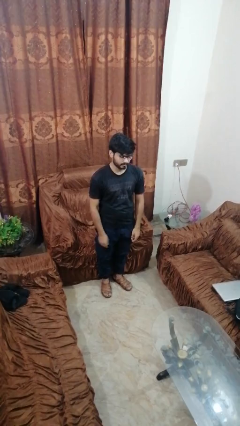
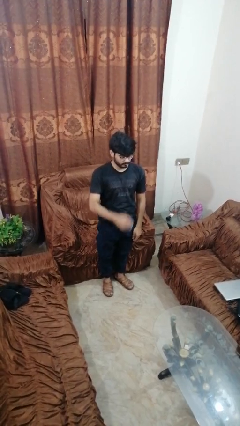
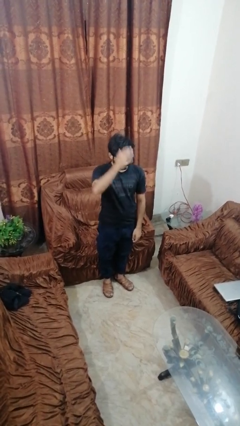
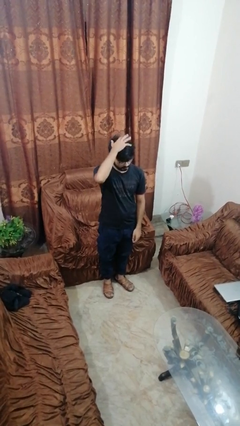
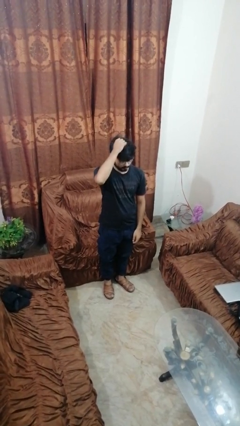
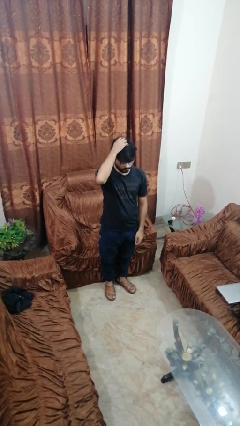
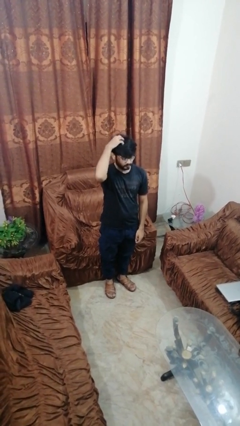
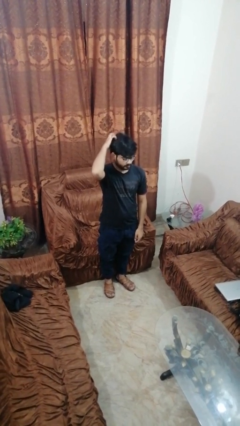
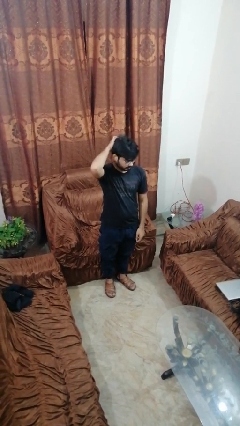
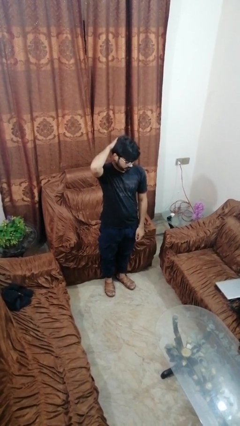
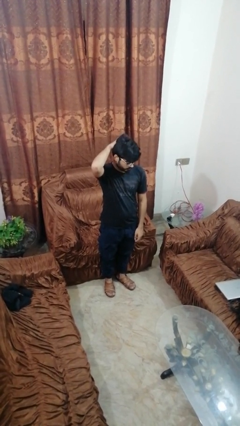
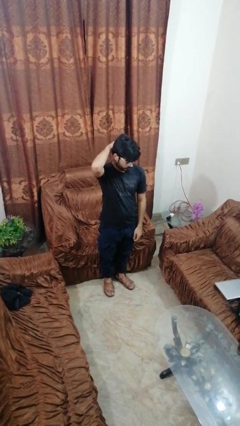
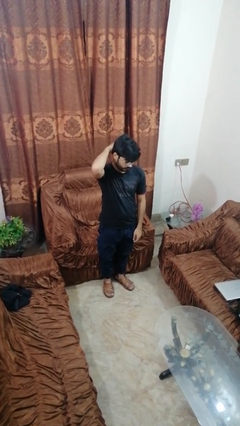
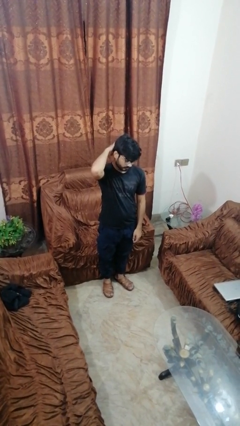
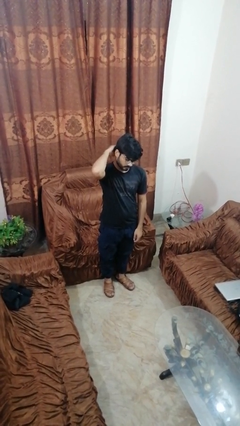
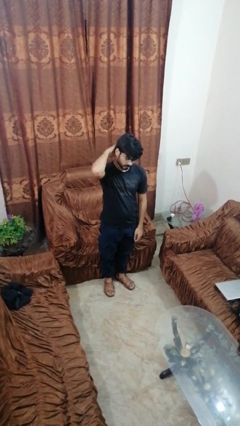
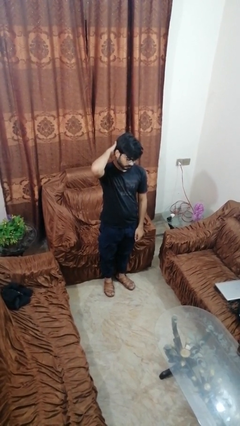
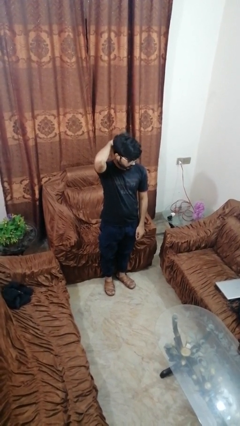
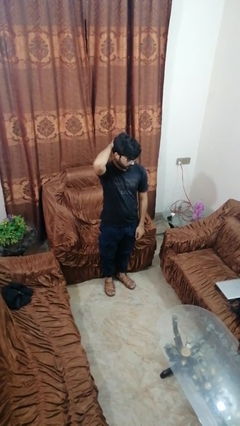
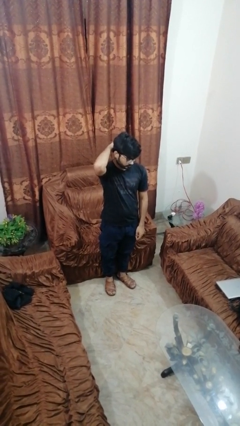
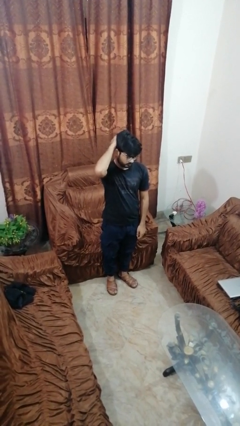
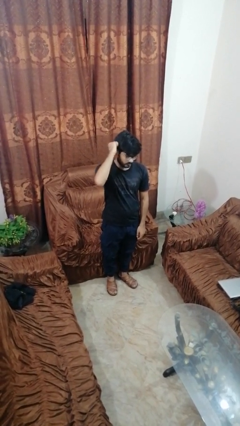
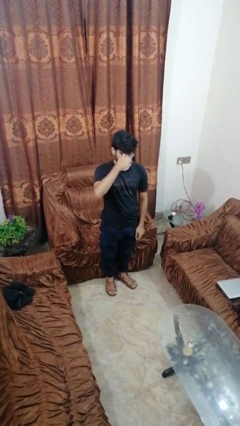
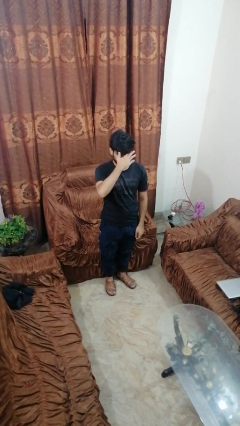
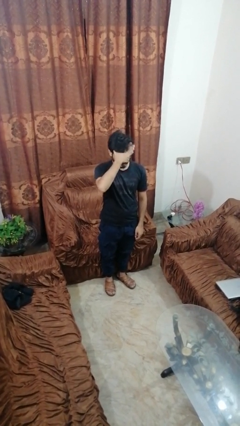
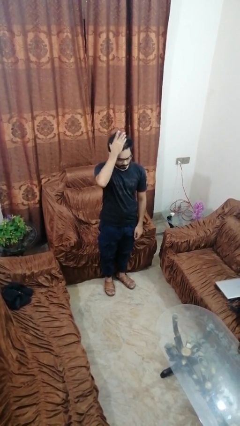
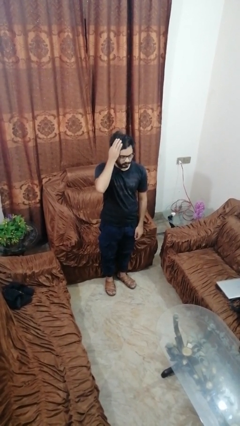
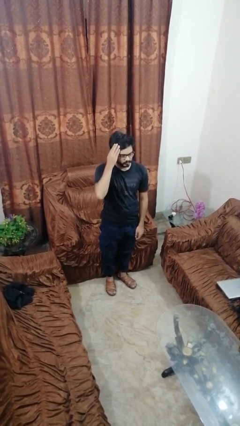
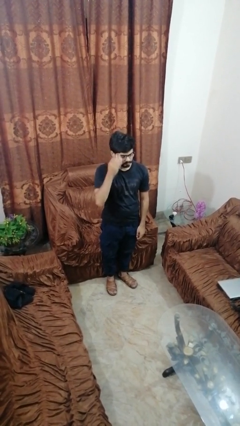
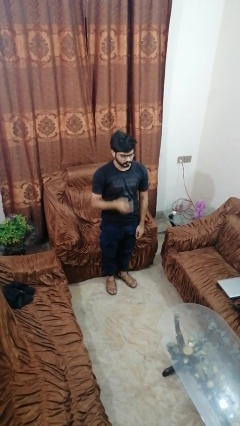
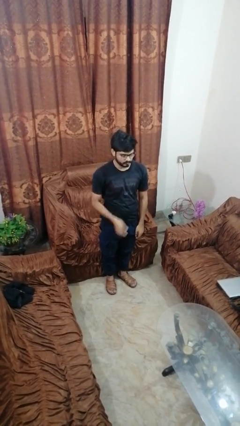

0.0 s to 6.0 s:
person scratches face

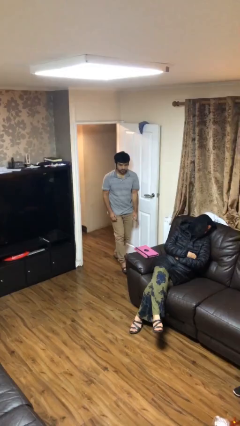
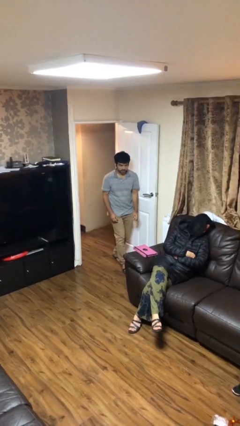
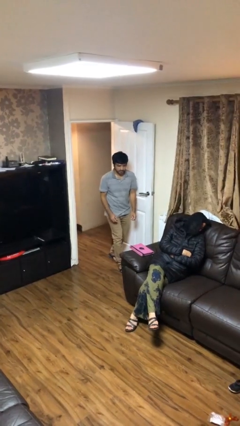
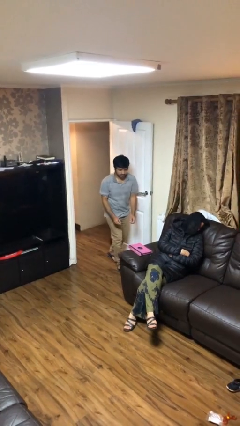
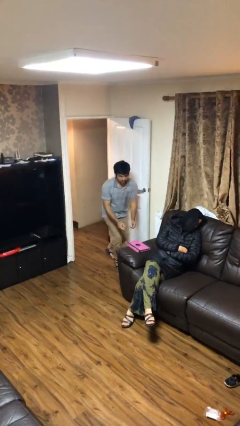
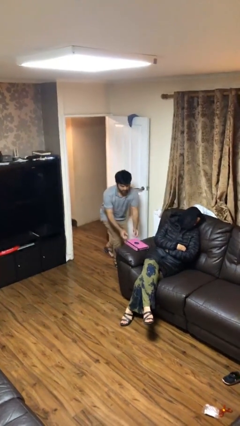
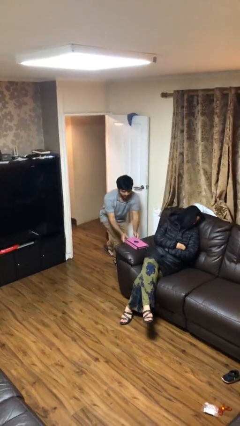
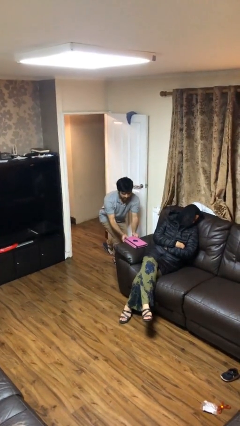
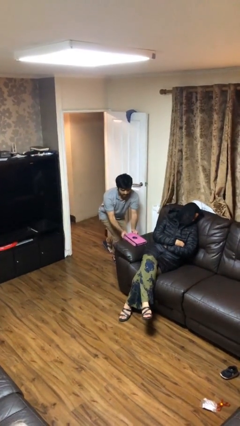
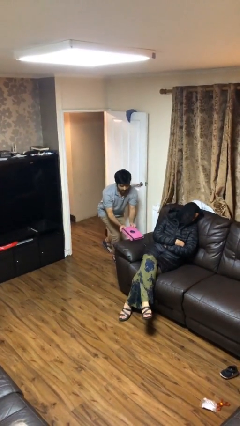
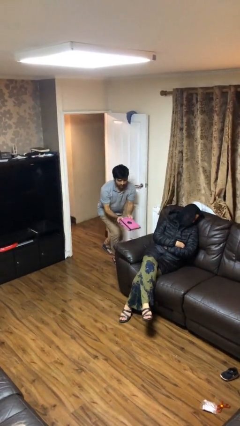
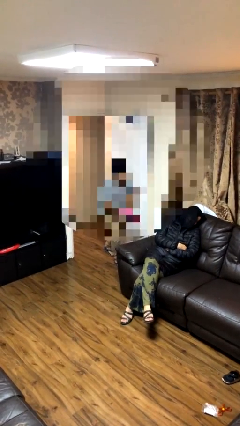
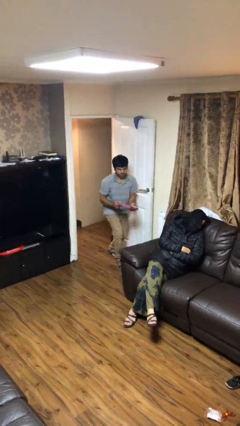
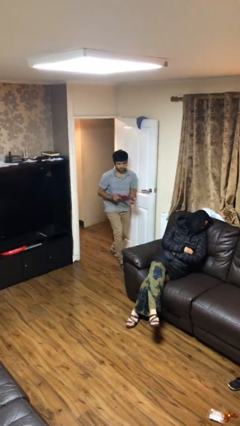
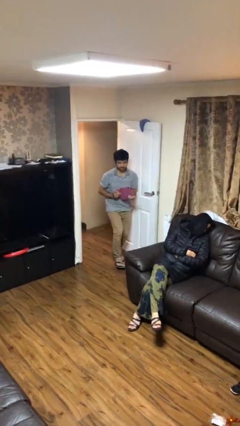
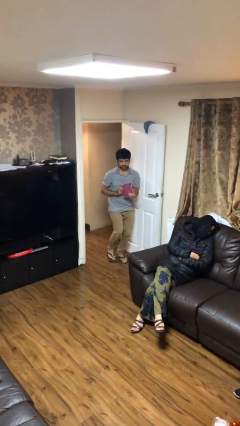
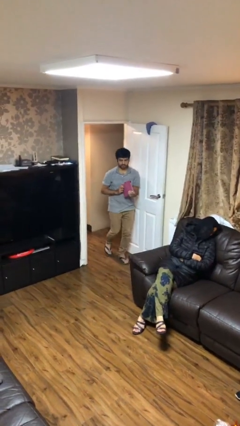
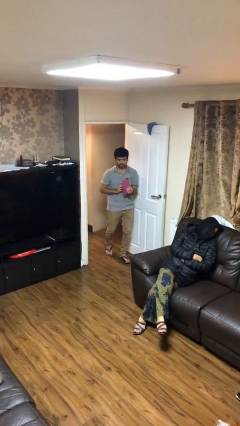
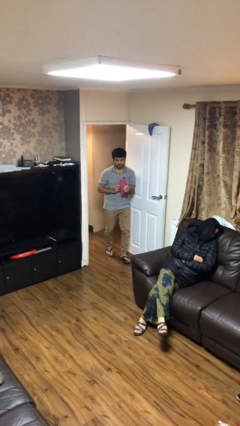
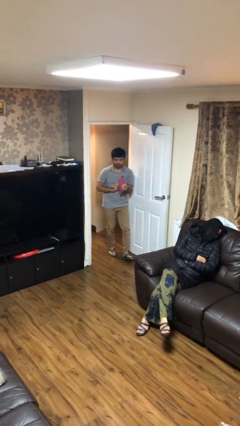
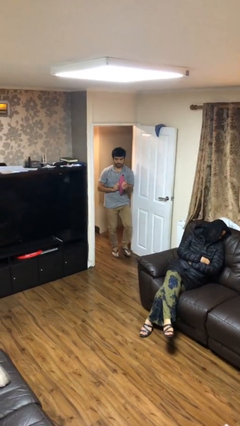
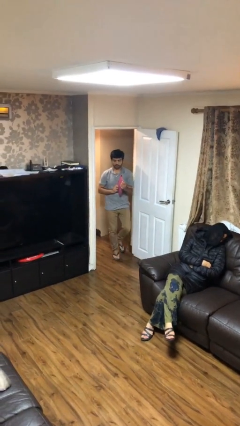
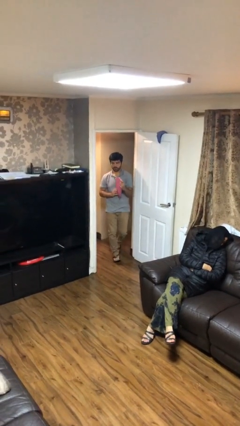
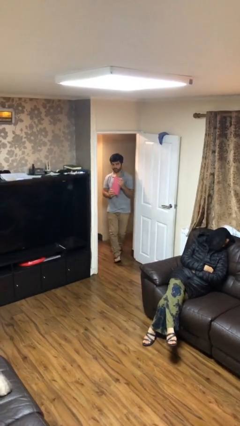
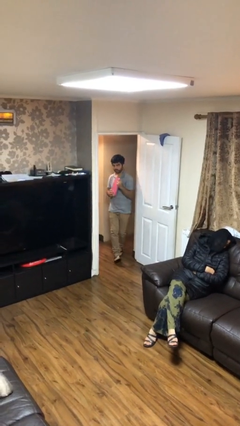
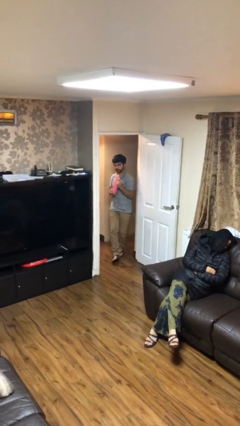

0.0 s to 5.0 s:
person steals object from person

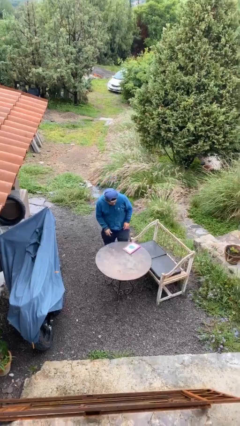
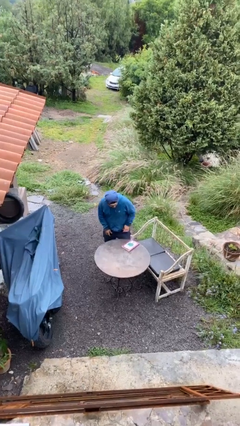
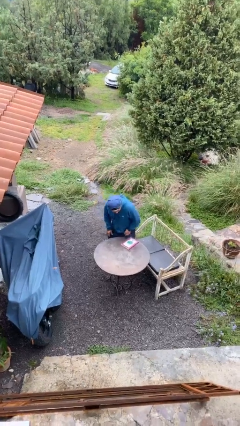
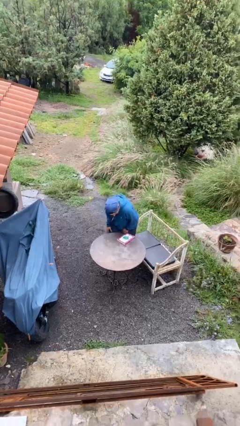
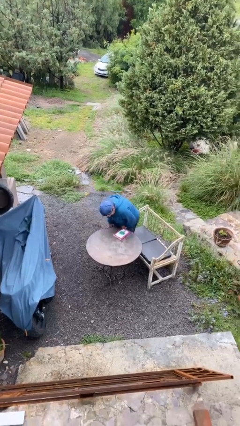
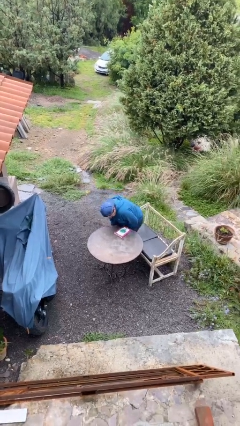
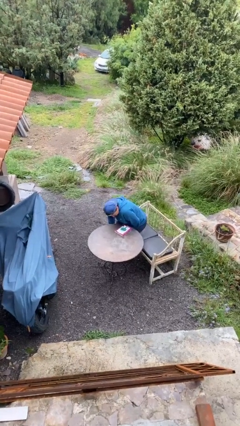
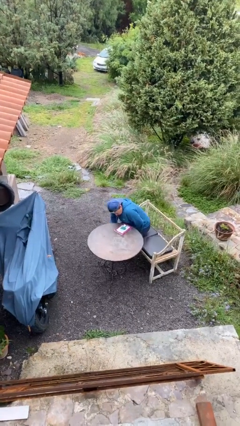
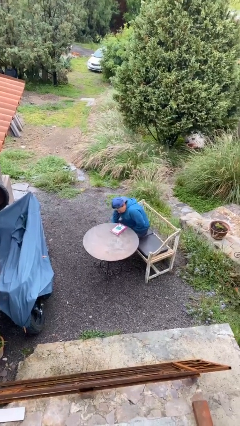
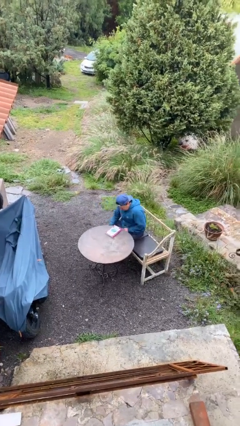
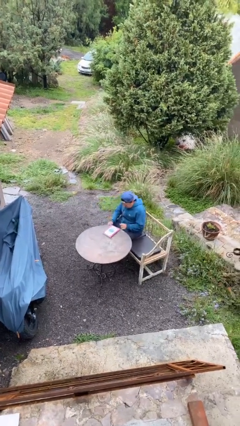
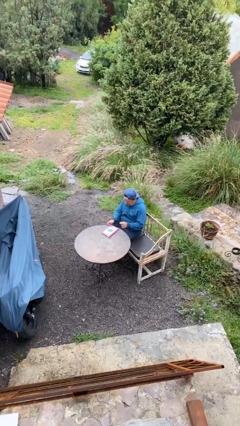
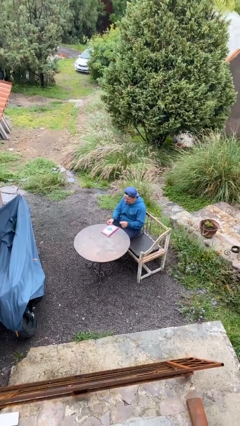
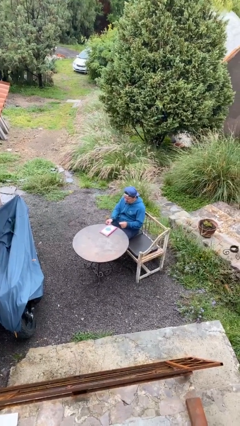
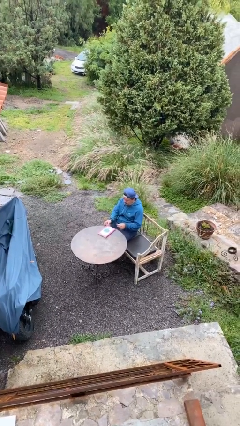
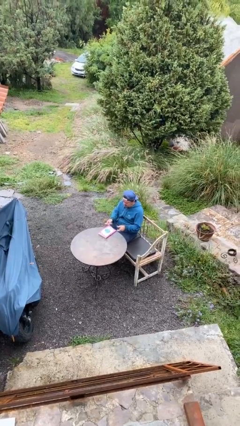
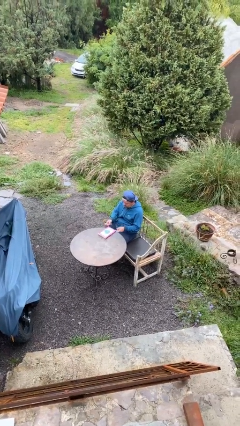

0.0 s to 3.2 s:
person sits down

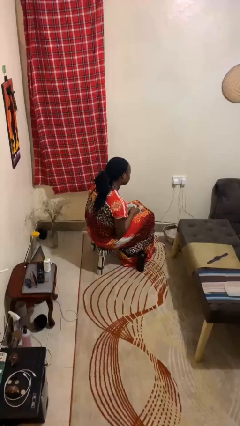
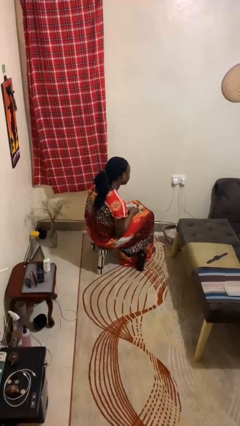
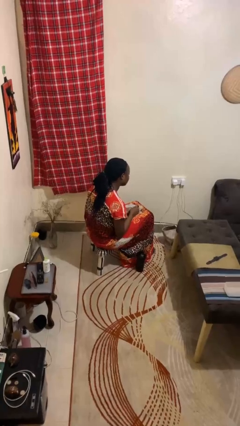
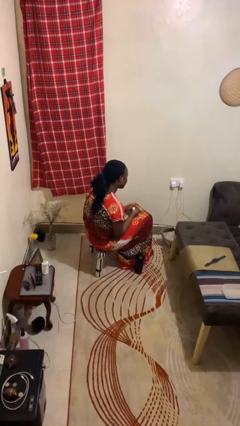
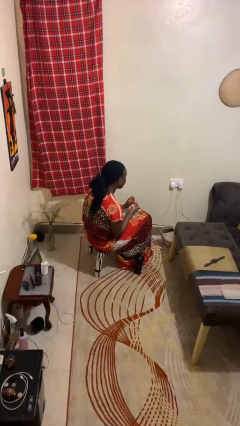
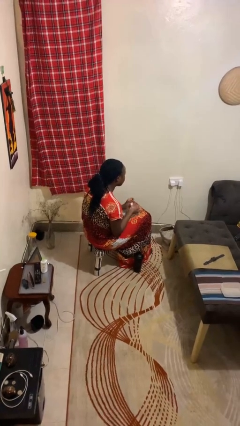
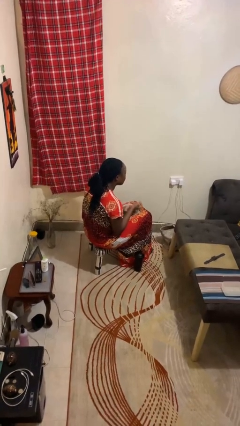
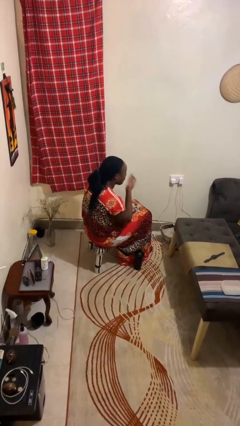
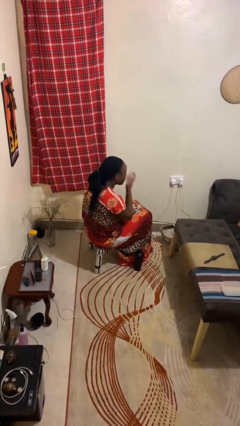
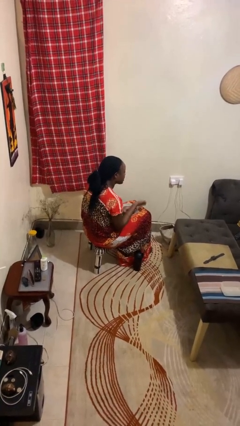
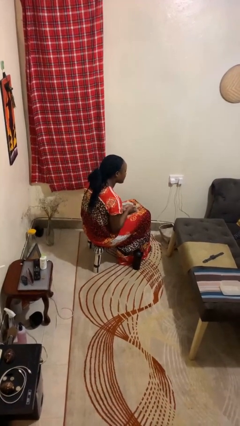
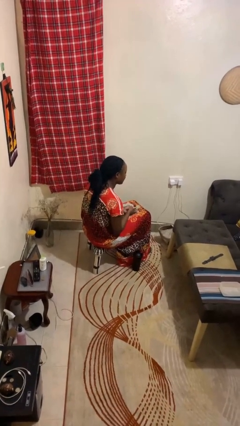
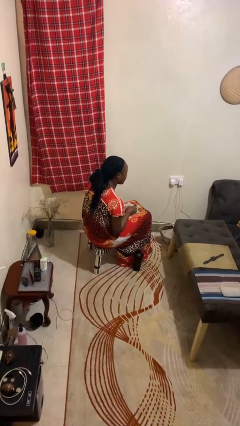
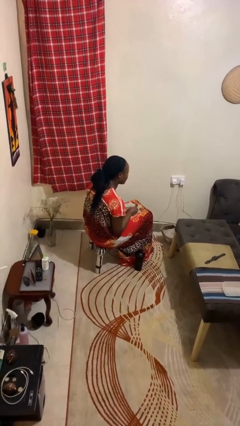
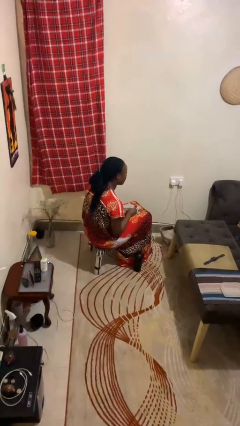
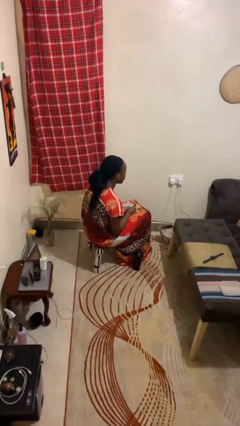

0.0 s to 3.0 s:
person takes medicine pills

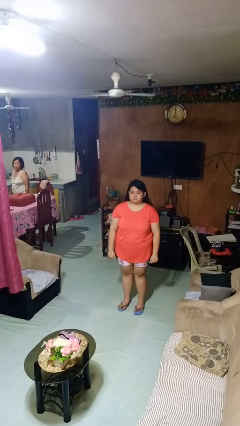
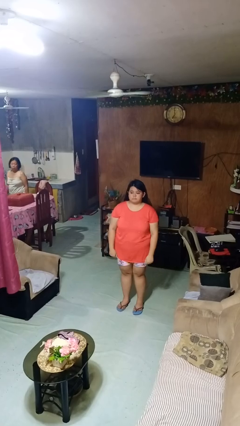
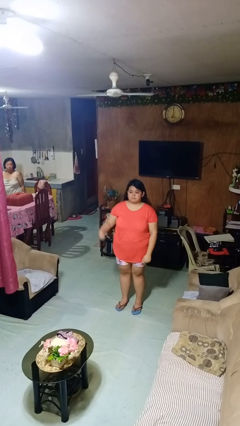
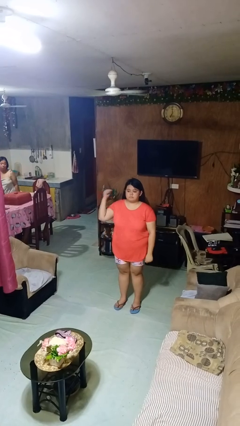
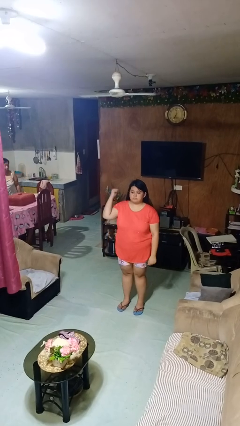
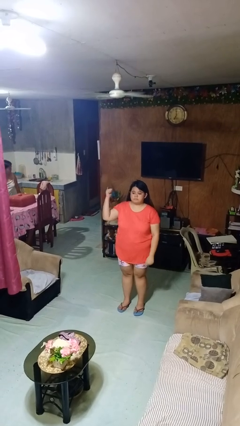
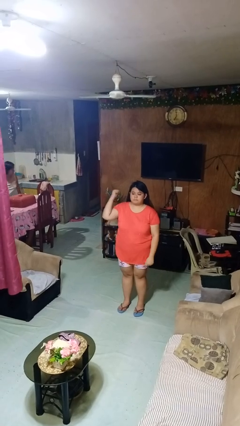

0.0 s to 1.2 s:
person gestures behind me
